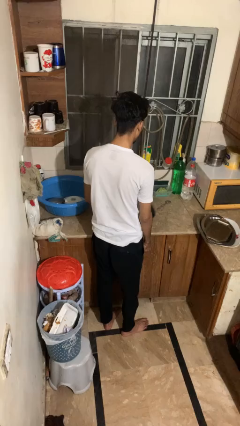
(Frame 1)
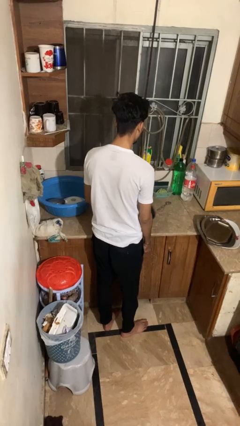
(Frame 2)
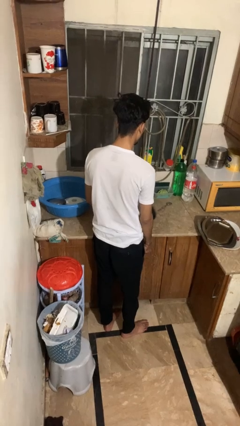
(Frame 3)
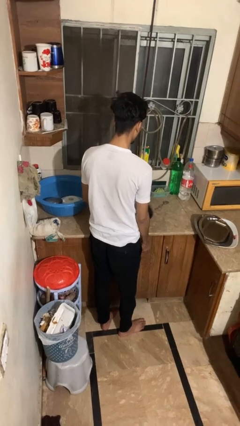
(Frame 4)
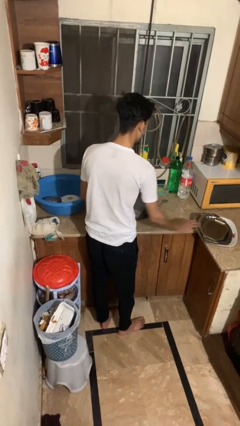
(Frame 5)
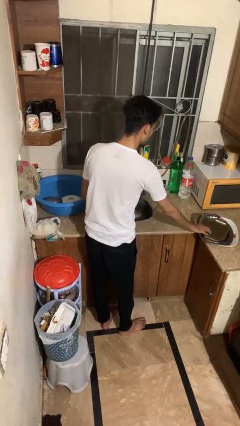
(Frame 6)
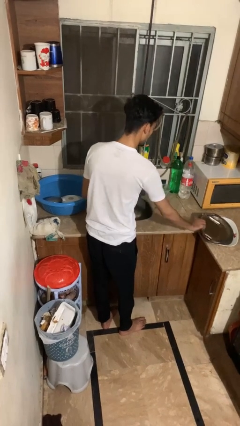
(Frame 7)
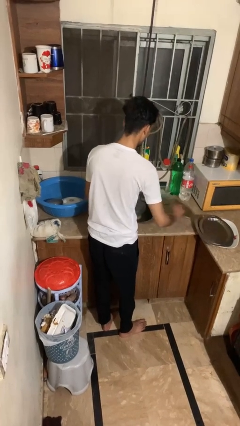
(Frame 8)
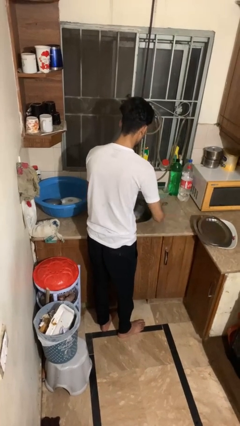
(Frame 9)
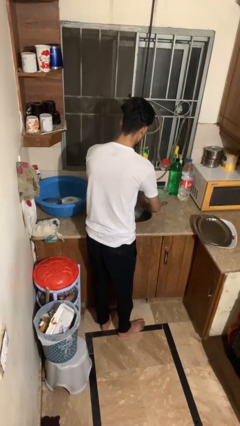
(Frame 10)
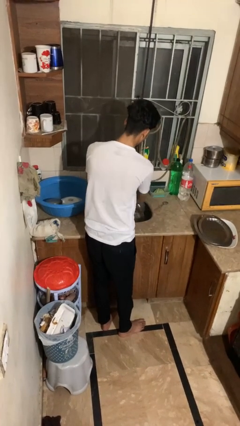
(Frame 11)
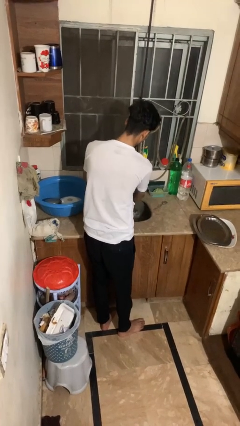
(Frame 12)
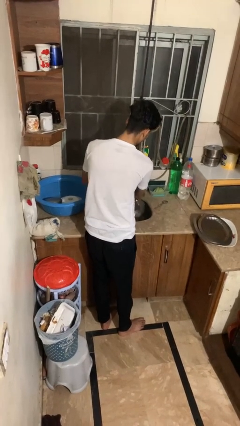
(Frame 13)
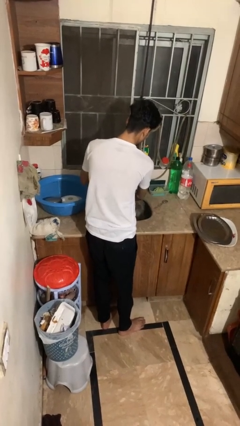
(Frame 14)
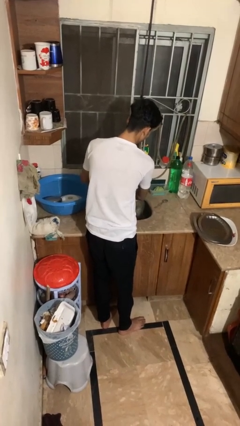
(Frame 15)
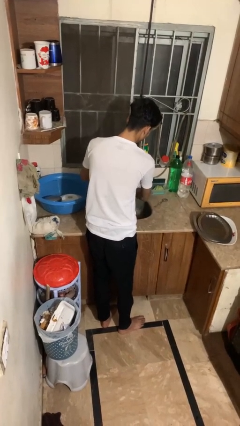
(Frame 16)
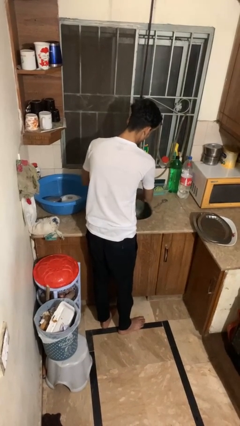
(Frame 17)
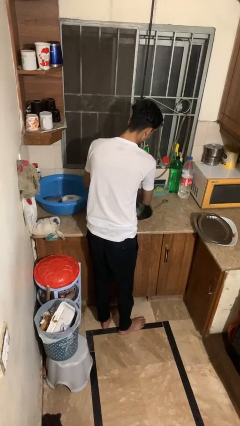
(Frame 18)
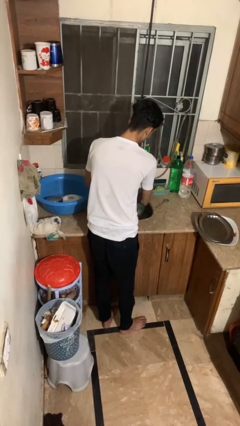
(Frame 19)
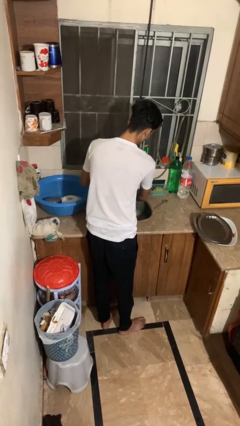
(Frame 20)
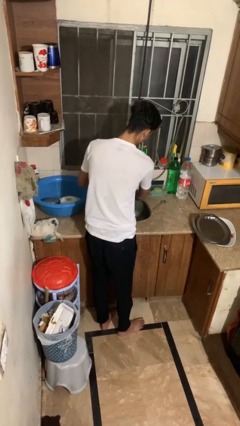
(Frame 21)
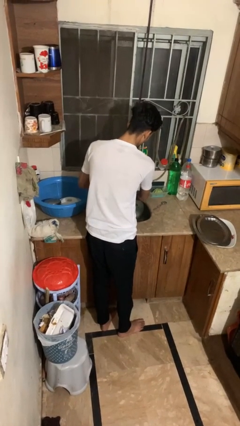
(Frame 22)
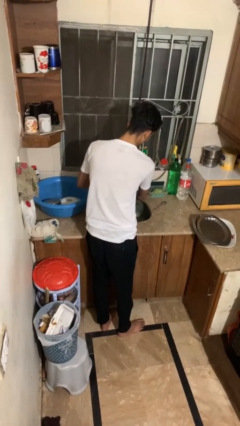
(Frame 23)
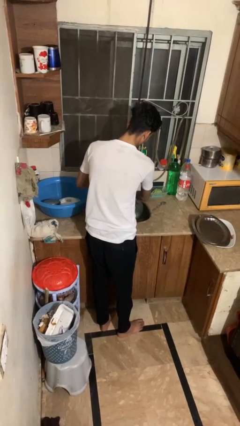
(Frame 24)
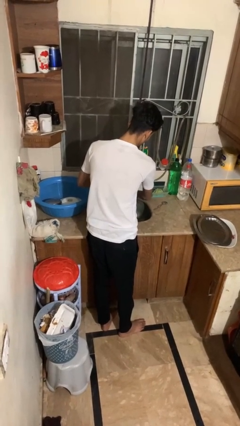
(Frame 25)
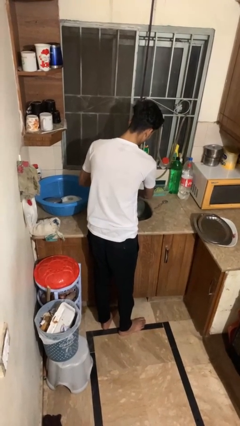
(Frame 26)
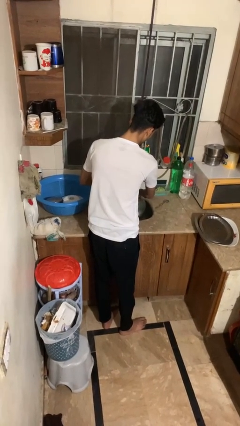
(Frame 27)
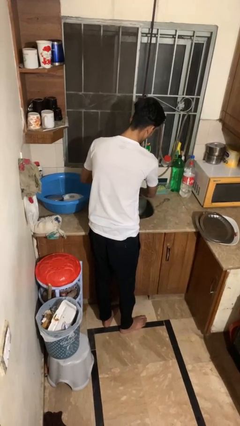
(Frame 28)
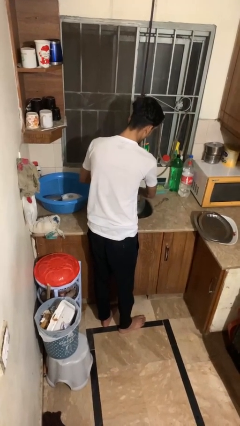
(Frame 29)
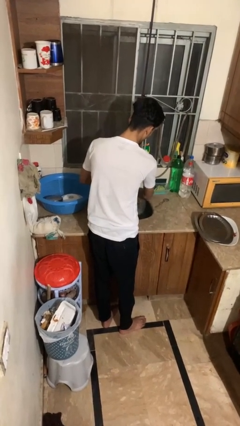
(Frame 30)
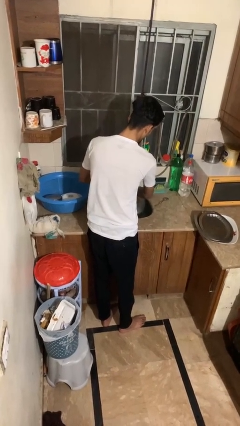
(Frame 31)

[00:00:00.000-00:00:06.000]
person washes dish

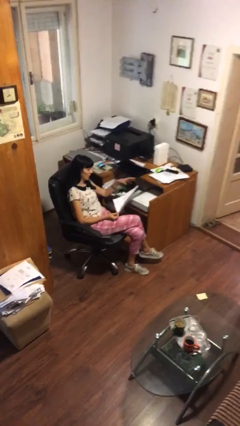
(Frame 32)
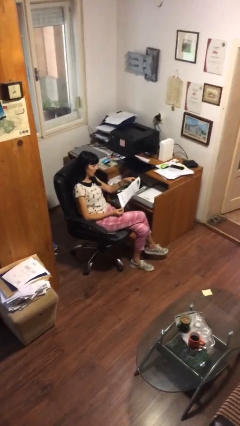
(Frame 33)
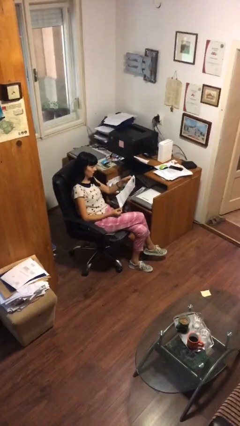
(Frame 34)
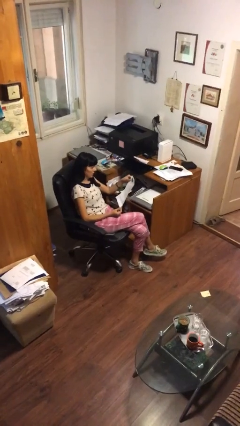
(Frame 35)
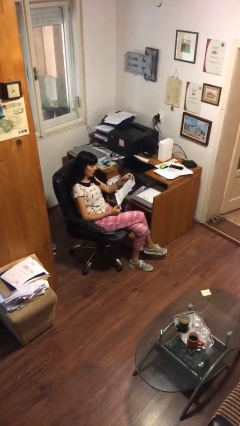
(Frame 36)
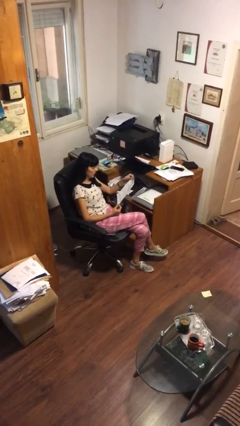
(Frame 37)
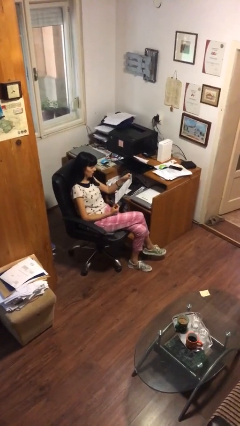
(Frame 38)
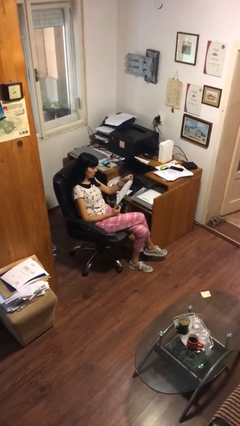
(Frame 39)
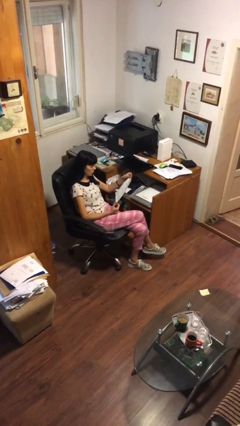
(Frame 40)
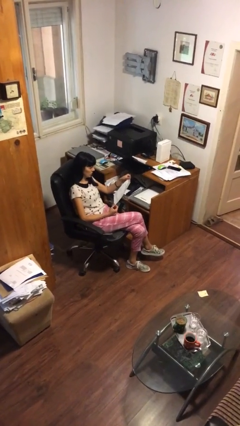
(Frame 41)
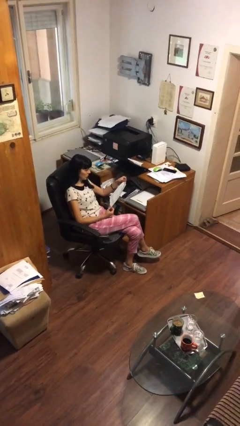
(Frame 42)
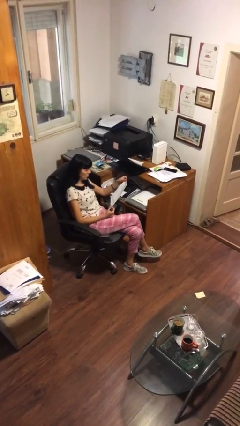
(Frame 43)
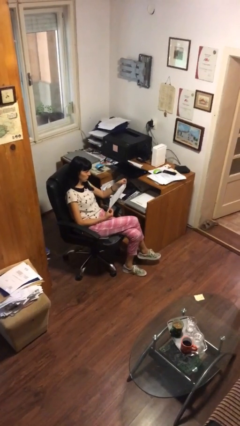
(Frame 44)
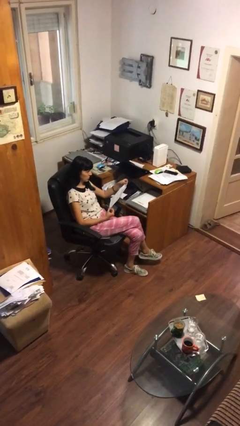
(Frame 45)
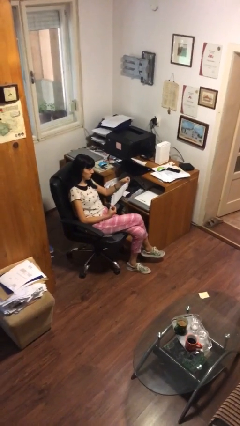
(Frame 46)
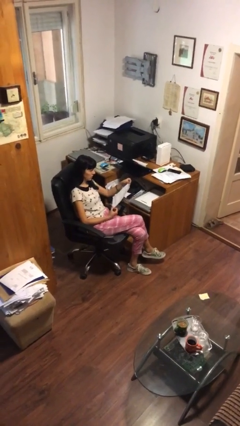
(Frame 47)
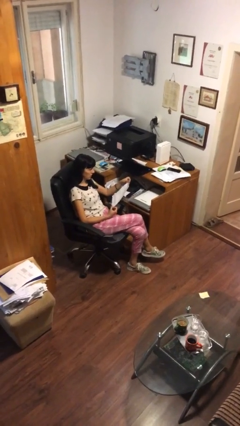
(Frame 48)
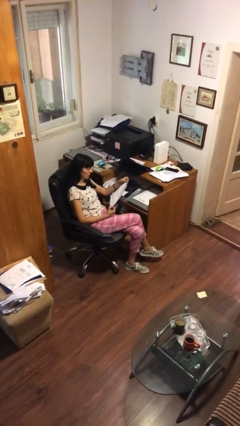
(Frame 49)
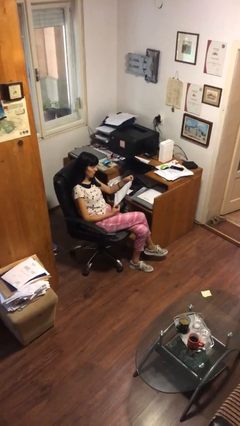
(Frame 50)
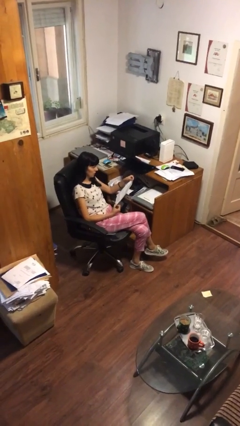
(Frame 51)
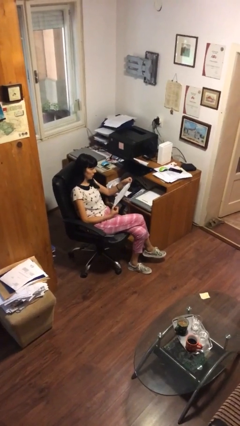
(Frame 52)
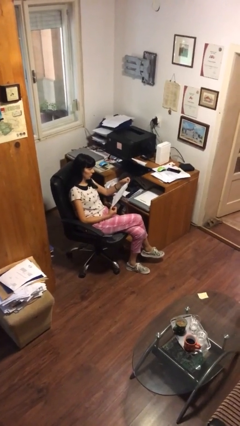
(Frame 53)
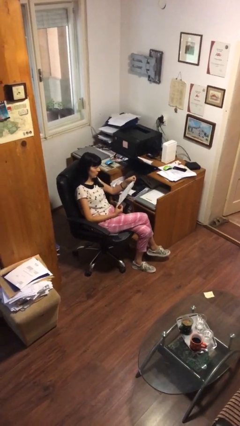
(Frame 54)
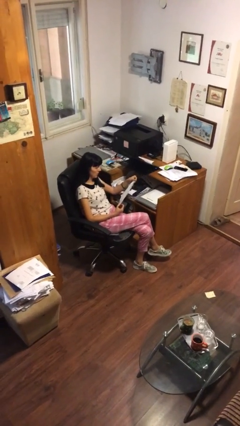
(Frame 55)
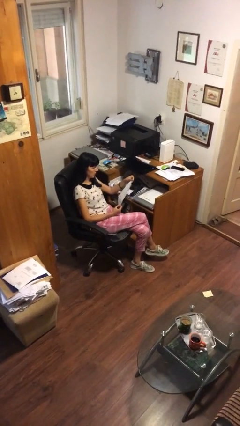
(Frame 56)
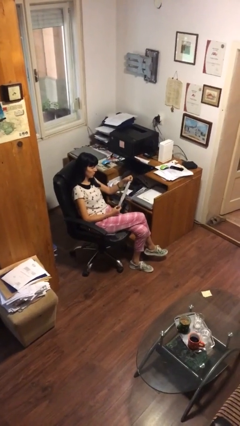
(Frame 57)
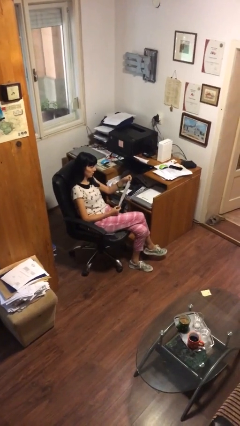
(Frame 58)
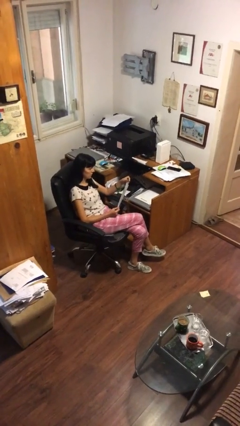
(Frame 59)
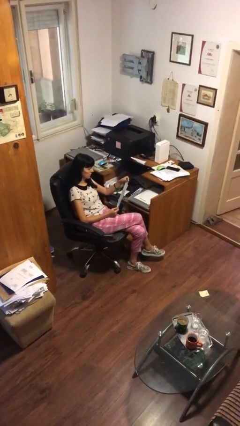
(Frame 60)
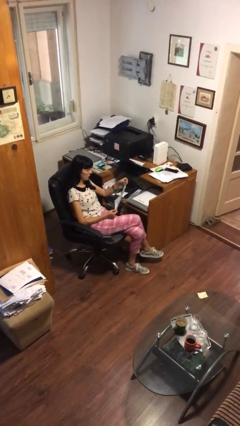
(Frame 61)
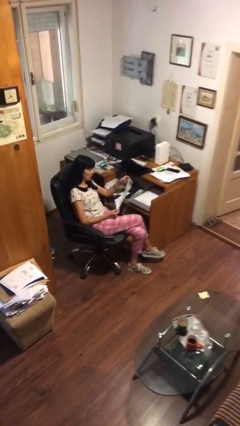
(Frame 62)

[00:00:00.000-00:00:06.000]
person reads document

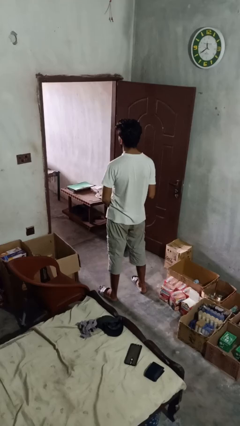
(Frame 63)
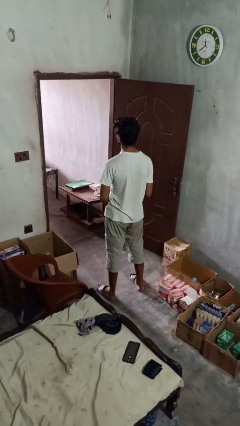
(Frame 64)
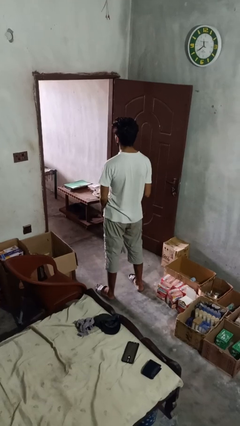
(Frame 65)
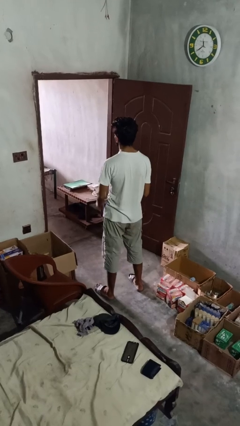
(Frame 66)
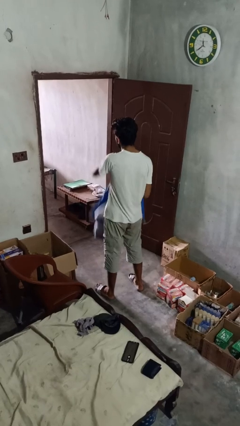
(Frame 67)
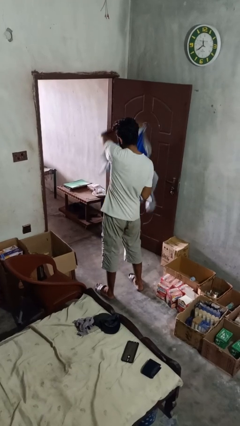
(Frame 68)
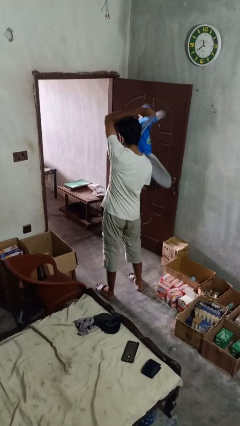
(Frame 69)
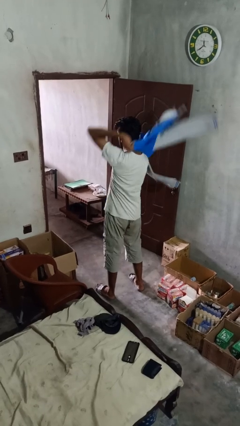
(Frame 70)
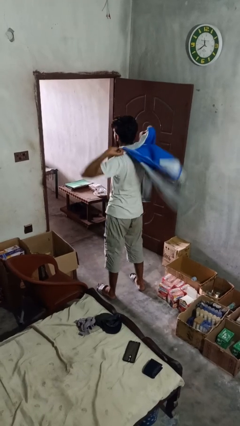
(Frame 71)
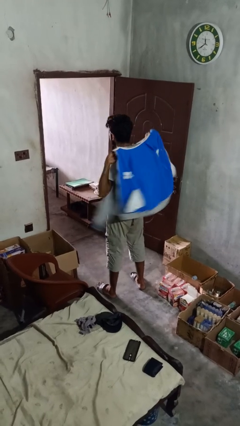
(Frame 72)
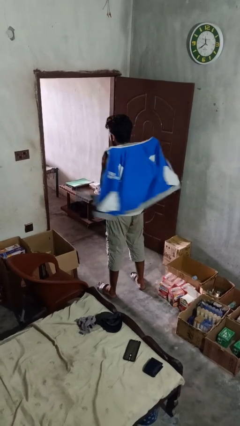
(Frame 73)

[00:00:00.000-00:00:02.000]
person puts on jacket

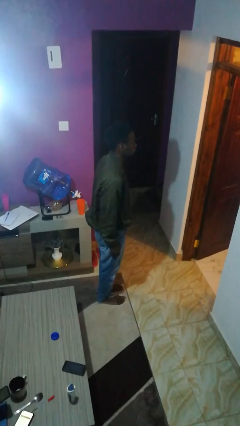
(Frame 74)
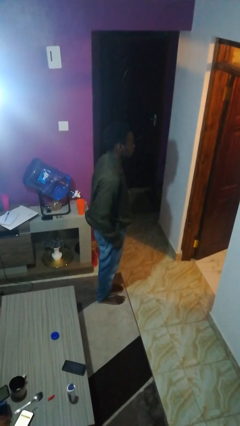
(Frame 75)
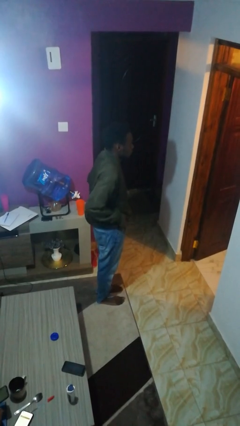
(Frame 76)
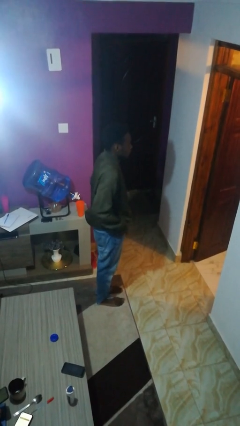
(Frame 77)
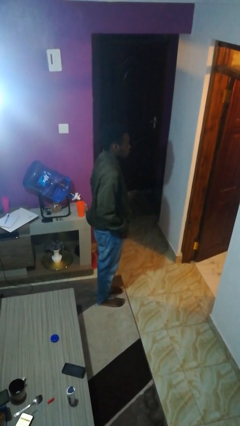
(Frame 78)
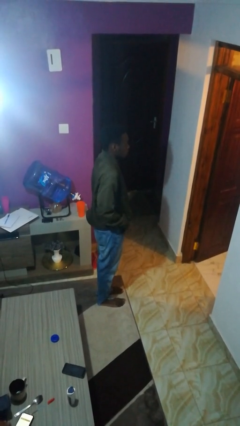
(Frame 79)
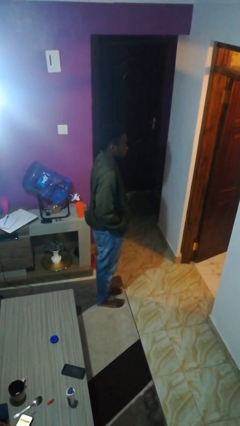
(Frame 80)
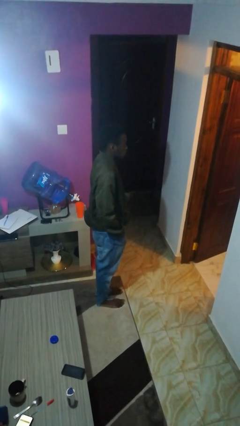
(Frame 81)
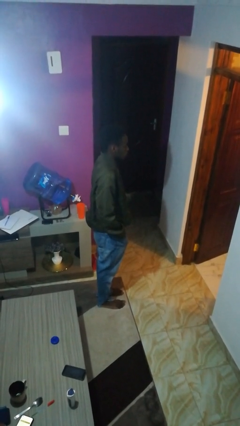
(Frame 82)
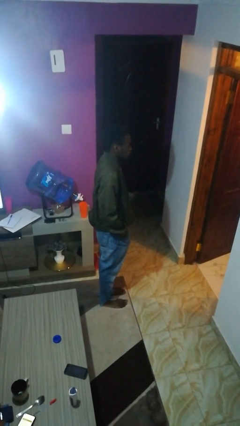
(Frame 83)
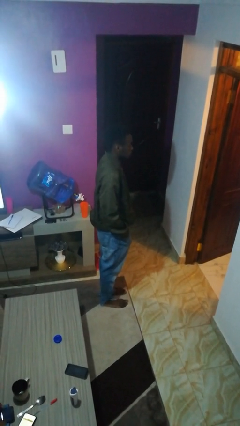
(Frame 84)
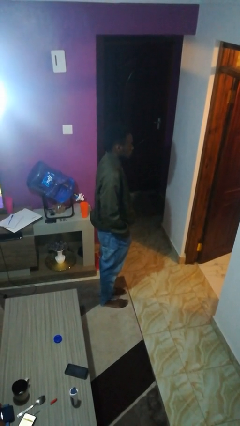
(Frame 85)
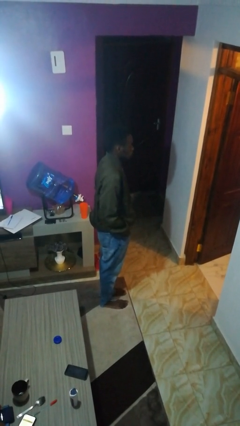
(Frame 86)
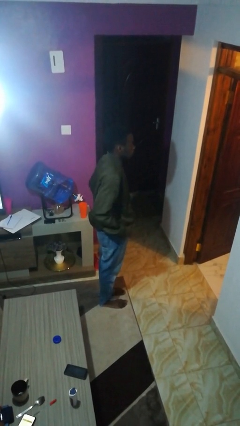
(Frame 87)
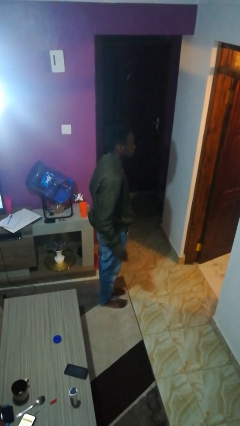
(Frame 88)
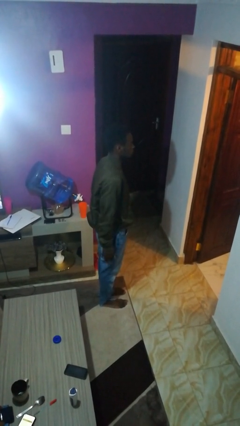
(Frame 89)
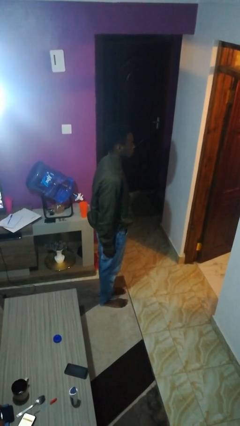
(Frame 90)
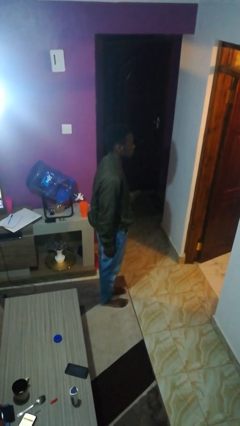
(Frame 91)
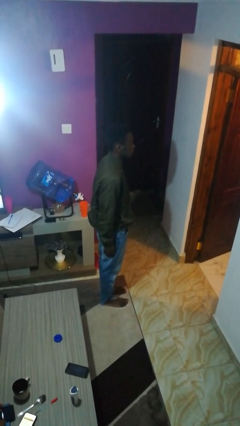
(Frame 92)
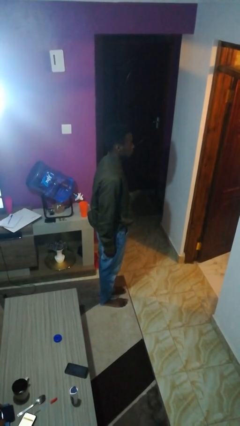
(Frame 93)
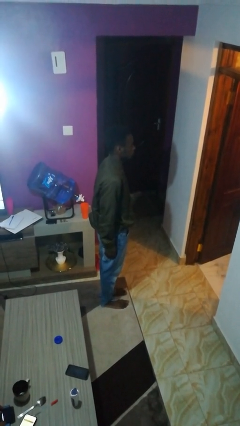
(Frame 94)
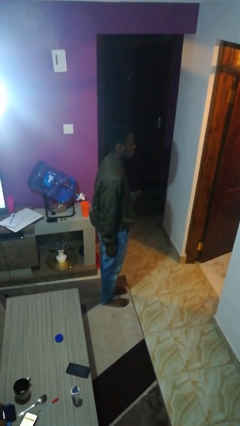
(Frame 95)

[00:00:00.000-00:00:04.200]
person puts hands in back pockets
